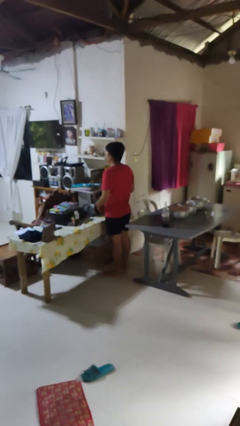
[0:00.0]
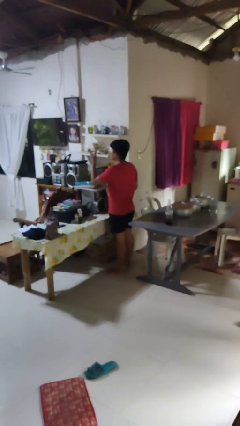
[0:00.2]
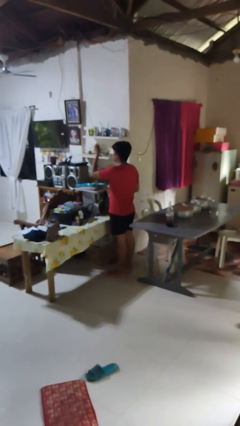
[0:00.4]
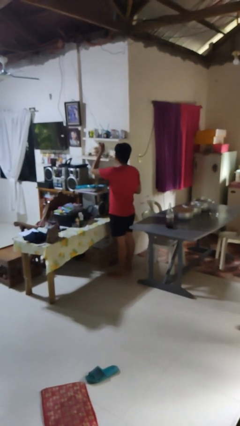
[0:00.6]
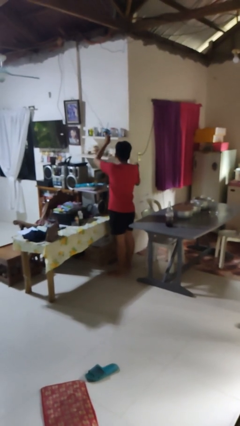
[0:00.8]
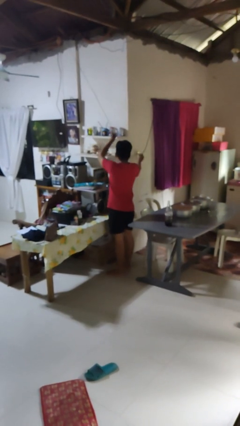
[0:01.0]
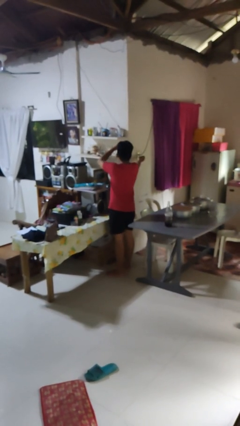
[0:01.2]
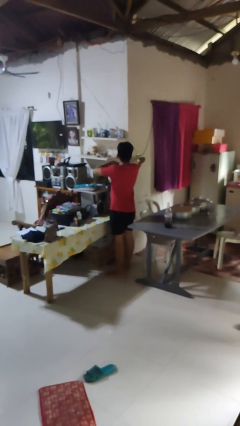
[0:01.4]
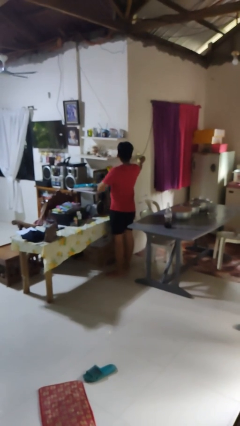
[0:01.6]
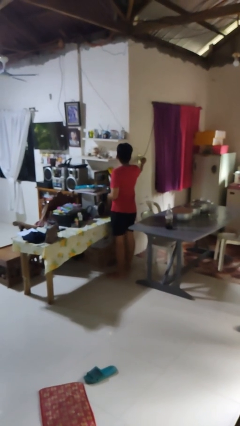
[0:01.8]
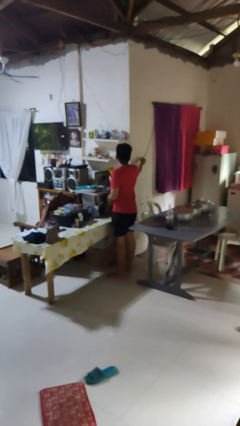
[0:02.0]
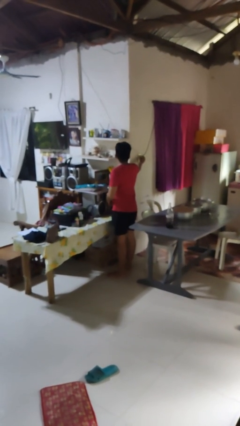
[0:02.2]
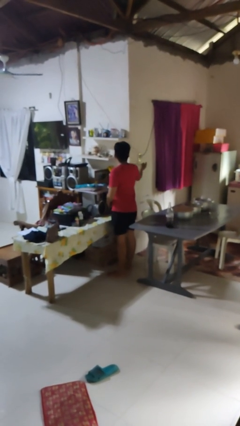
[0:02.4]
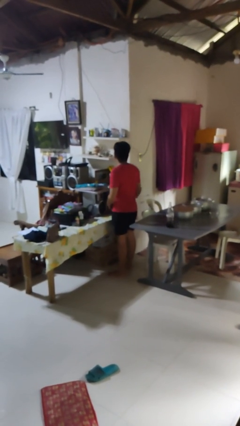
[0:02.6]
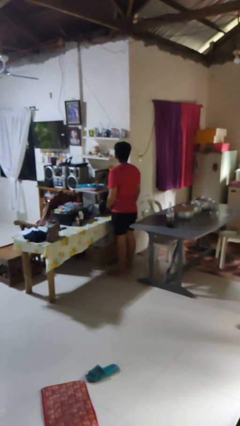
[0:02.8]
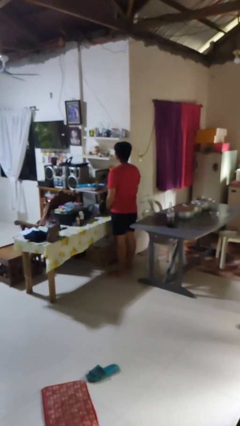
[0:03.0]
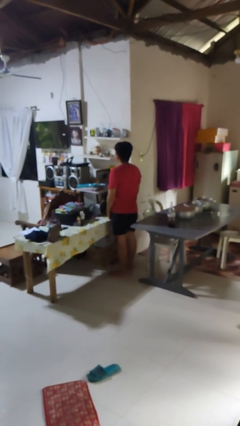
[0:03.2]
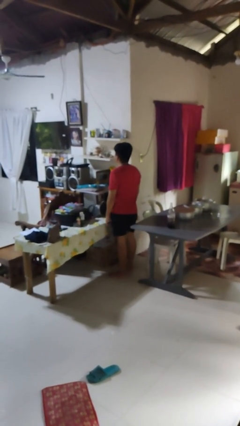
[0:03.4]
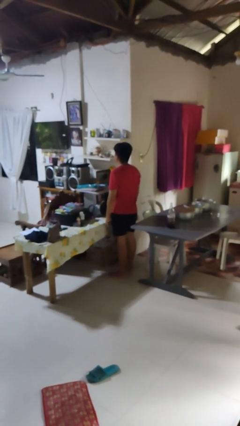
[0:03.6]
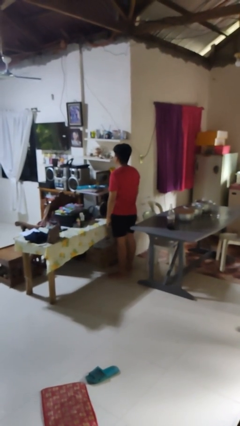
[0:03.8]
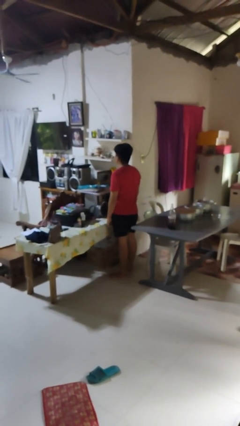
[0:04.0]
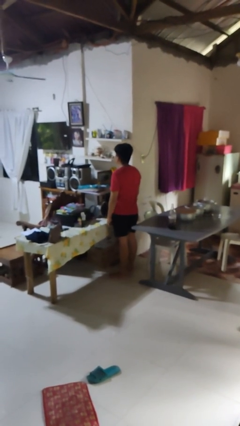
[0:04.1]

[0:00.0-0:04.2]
person turns on fan

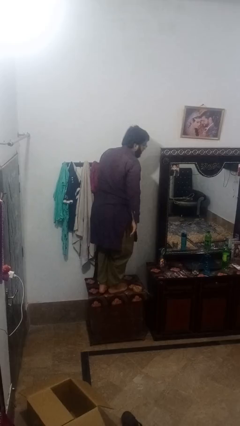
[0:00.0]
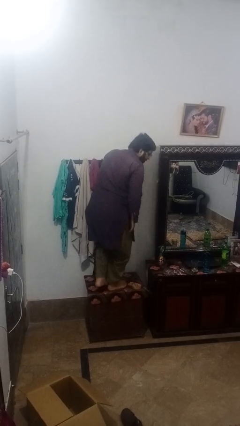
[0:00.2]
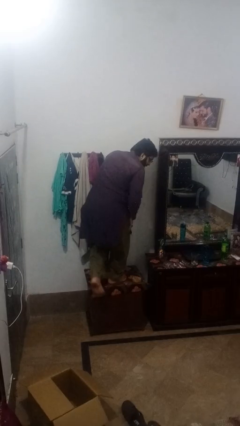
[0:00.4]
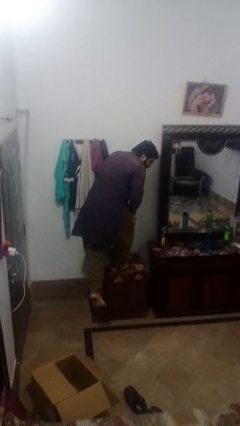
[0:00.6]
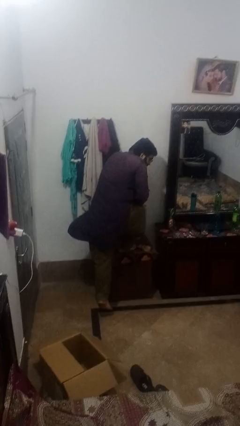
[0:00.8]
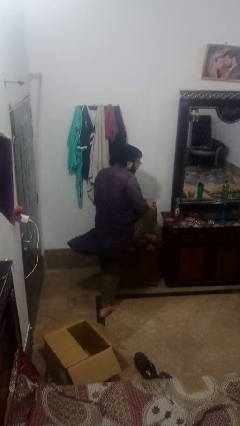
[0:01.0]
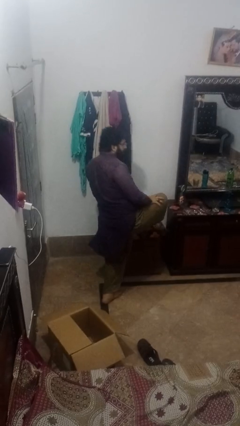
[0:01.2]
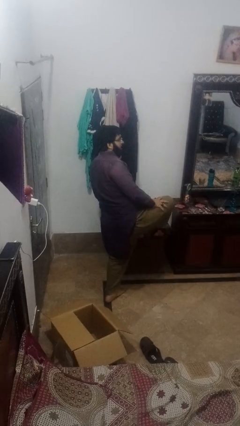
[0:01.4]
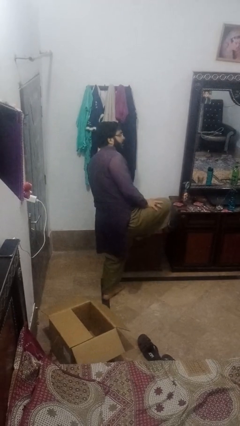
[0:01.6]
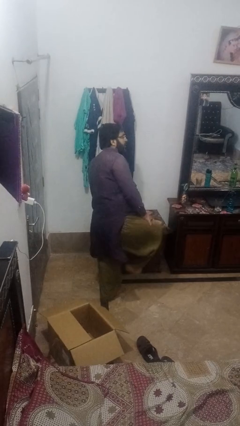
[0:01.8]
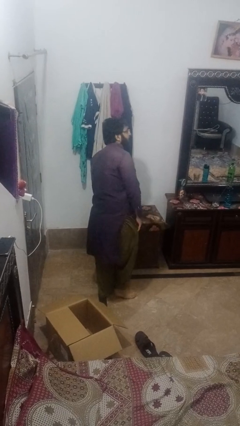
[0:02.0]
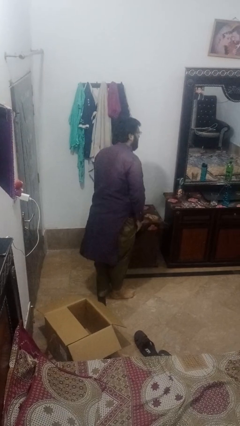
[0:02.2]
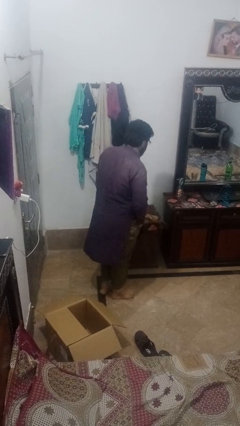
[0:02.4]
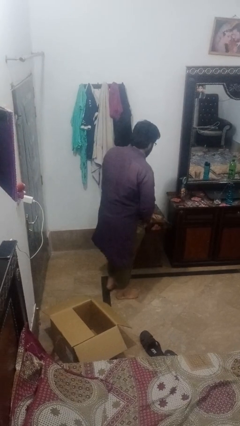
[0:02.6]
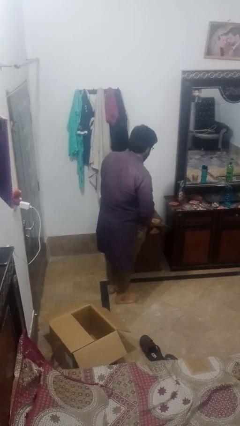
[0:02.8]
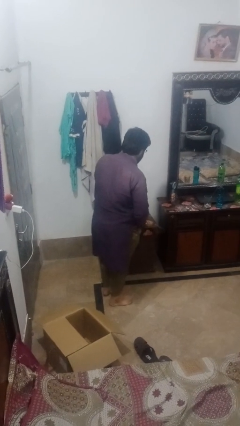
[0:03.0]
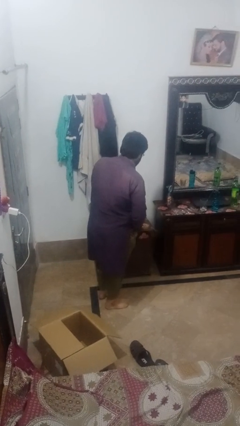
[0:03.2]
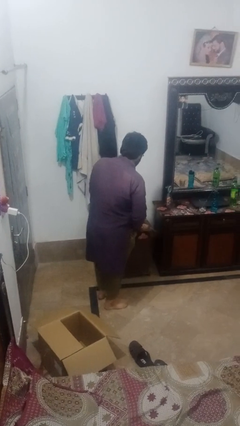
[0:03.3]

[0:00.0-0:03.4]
person climbs off table

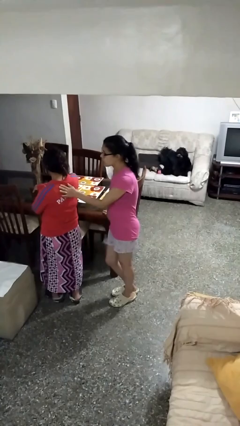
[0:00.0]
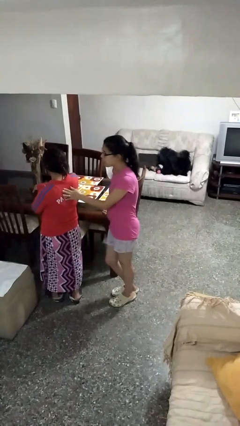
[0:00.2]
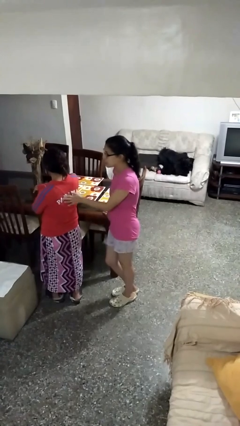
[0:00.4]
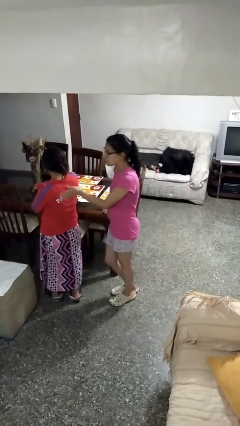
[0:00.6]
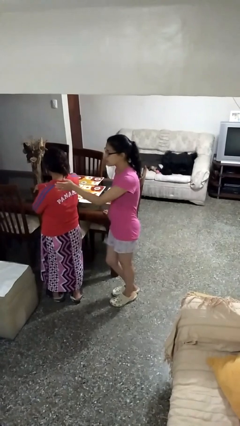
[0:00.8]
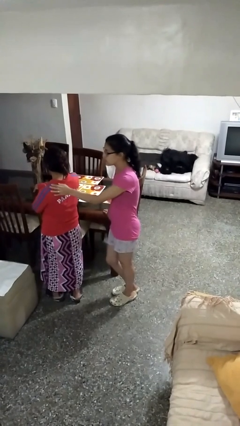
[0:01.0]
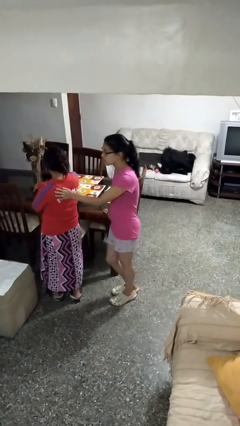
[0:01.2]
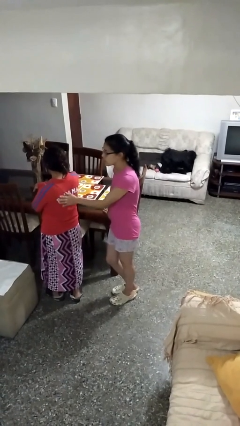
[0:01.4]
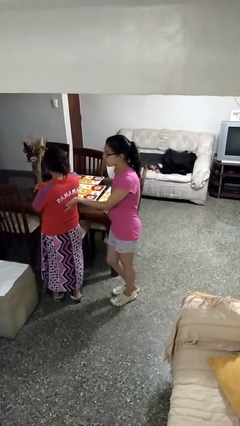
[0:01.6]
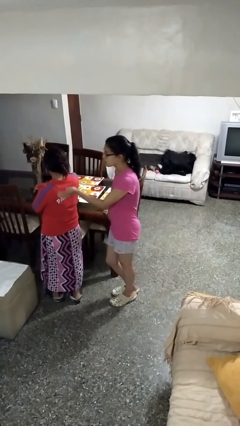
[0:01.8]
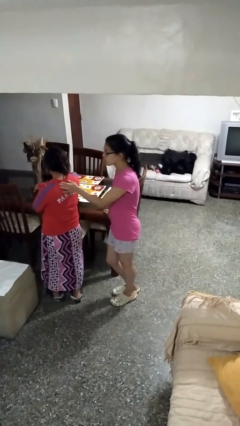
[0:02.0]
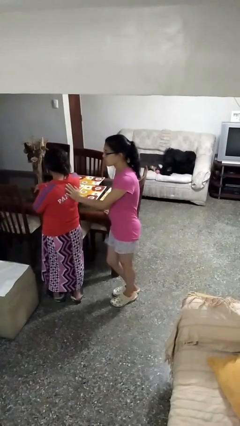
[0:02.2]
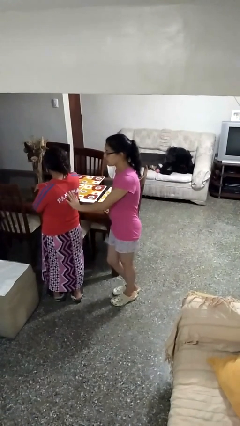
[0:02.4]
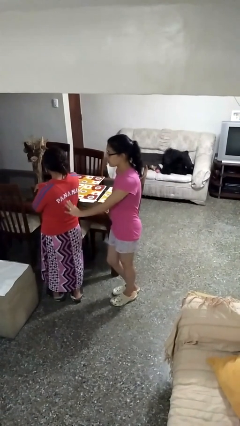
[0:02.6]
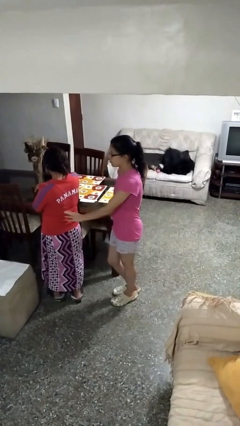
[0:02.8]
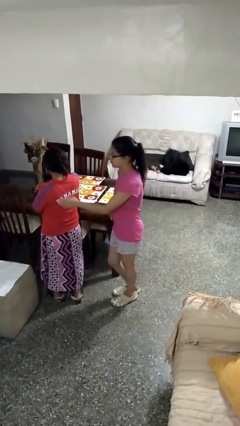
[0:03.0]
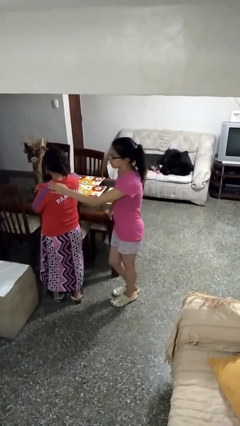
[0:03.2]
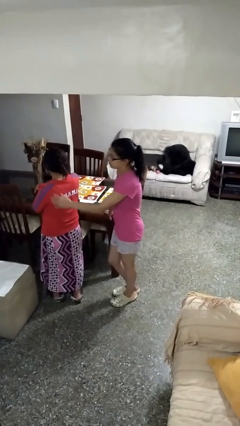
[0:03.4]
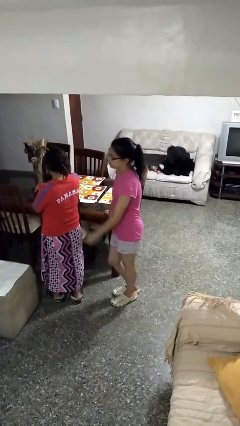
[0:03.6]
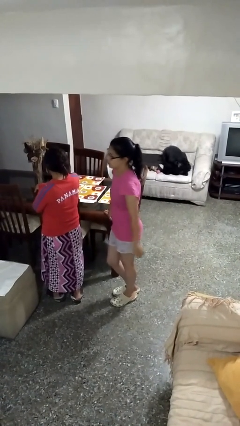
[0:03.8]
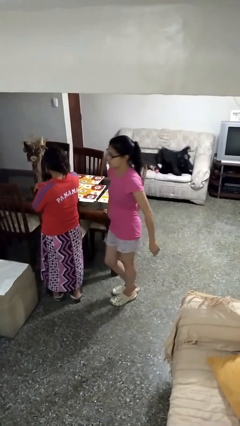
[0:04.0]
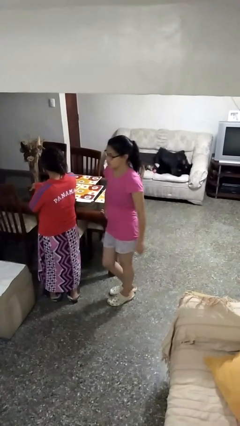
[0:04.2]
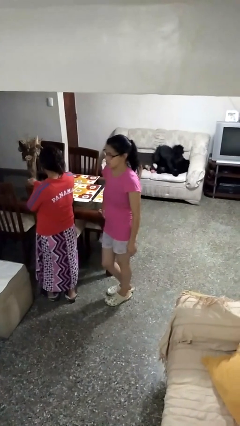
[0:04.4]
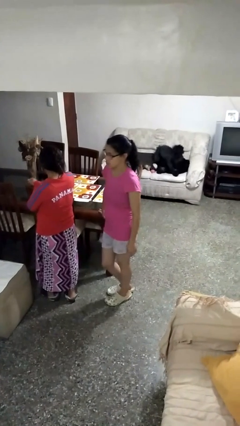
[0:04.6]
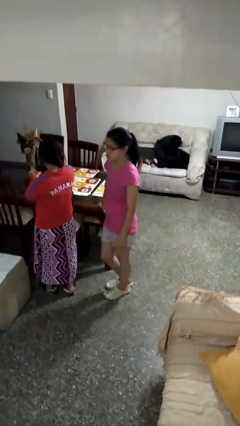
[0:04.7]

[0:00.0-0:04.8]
person touches back of person

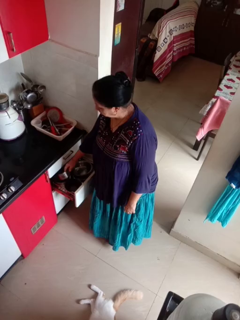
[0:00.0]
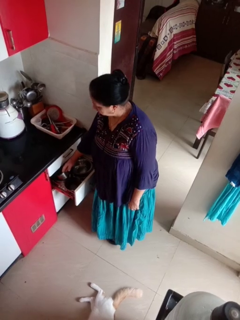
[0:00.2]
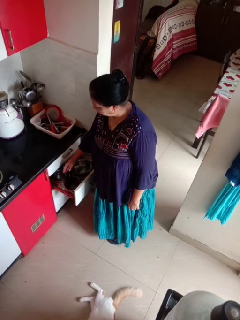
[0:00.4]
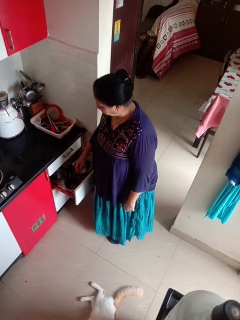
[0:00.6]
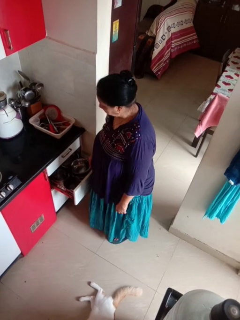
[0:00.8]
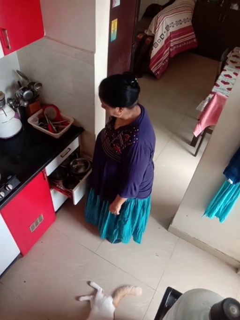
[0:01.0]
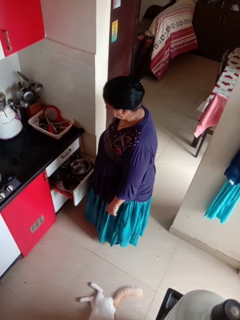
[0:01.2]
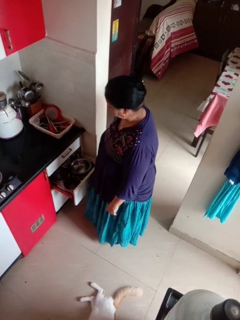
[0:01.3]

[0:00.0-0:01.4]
person puts object into kitchen drawer

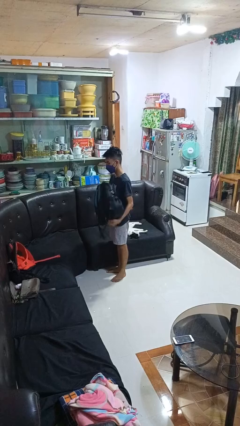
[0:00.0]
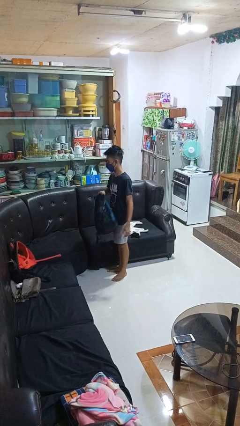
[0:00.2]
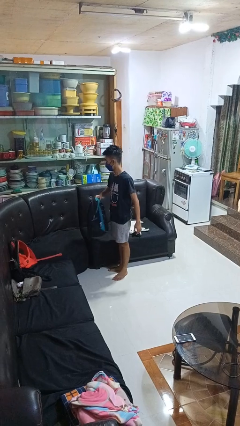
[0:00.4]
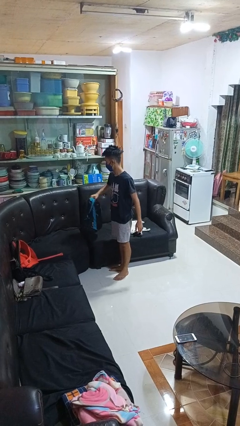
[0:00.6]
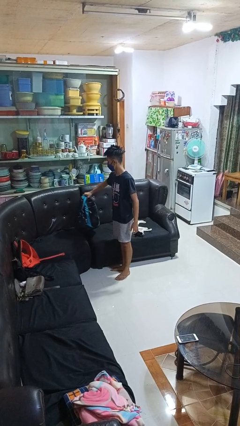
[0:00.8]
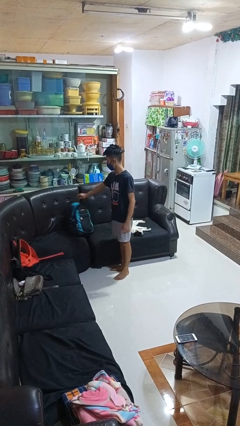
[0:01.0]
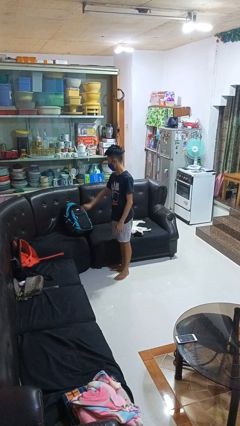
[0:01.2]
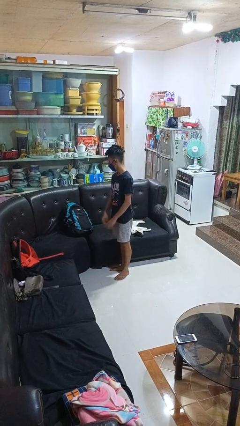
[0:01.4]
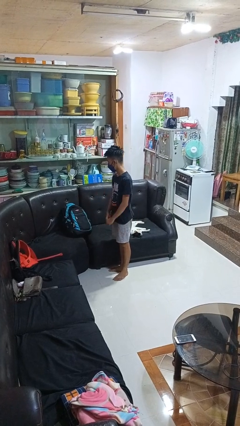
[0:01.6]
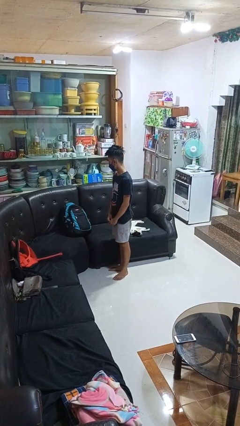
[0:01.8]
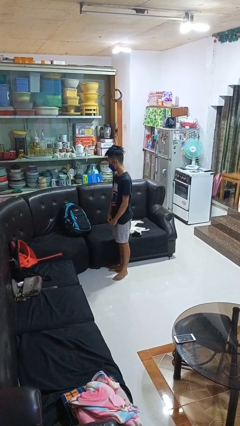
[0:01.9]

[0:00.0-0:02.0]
person puts down object on couch

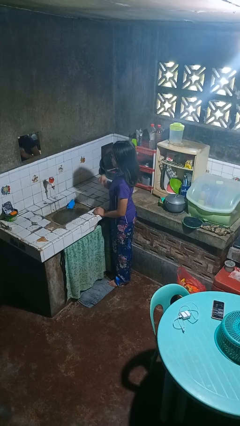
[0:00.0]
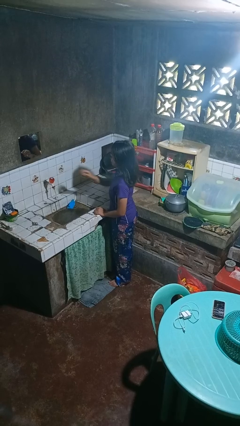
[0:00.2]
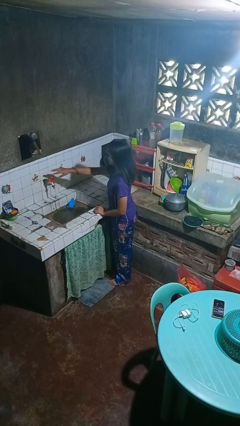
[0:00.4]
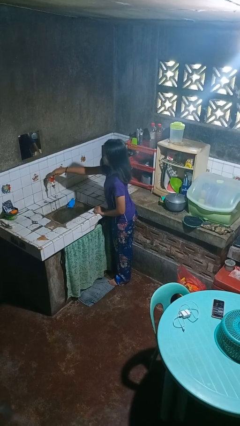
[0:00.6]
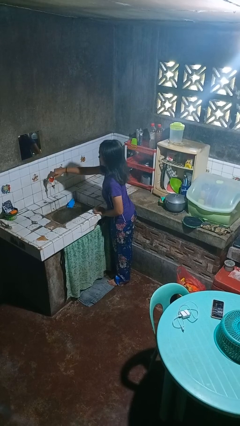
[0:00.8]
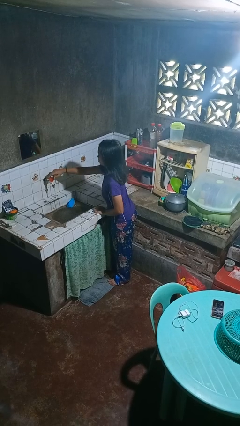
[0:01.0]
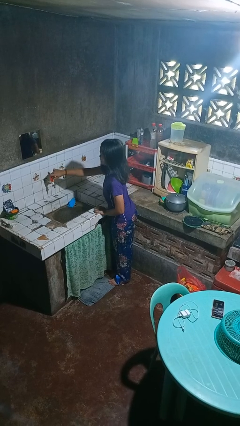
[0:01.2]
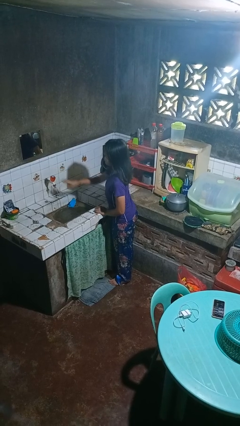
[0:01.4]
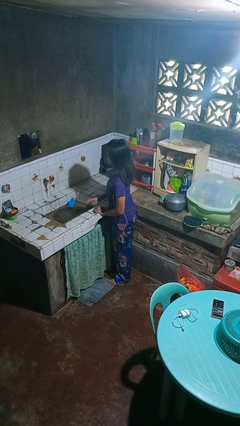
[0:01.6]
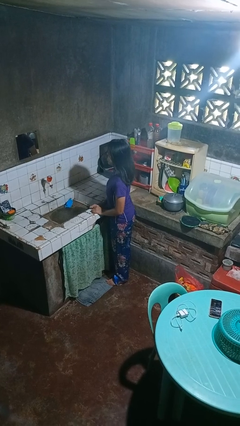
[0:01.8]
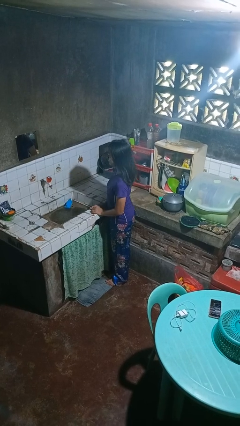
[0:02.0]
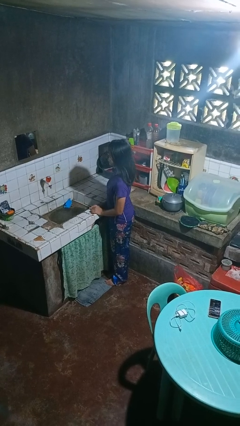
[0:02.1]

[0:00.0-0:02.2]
person turns off faucet
